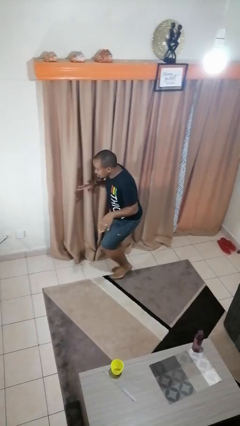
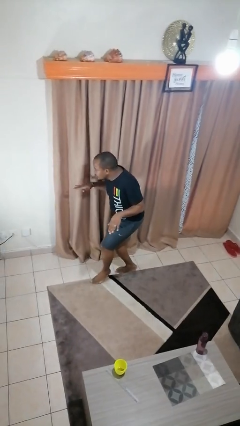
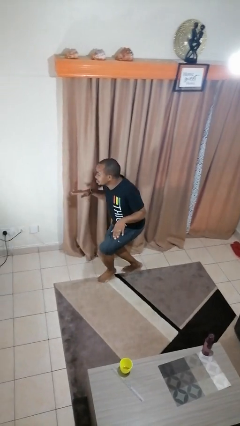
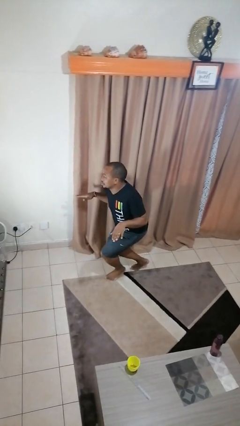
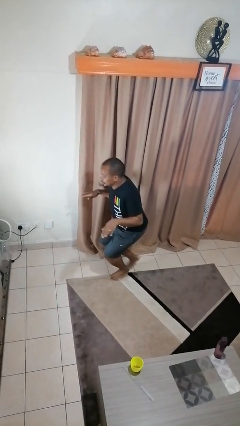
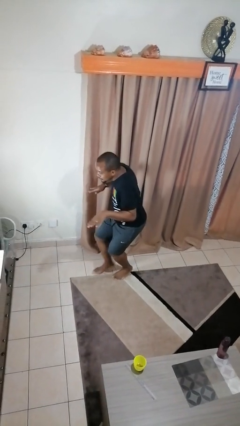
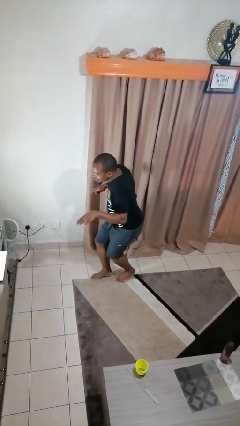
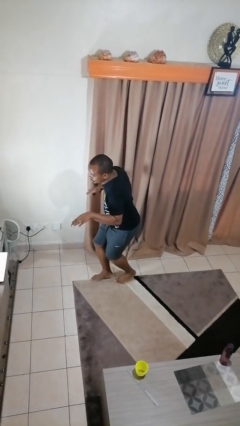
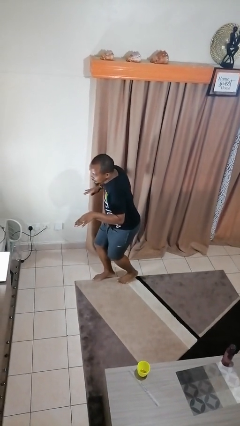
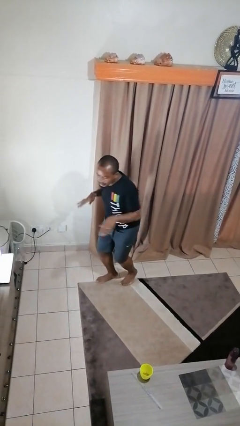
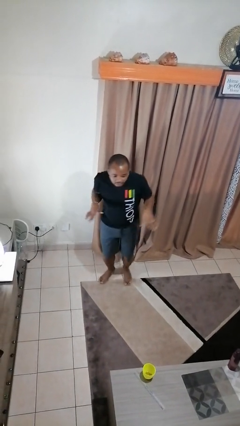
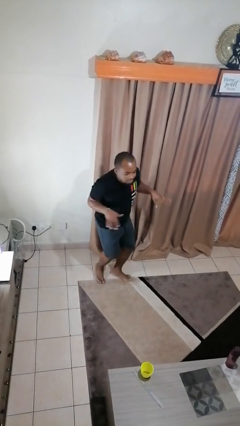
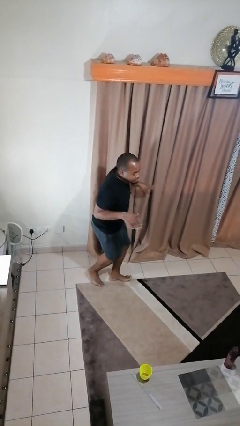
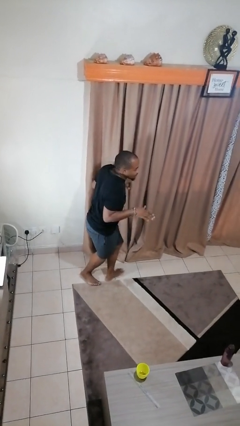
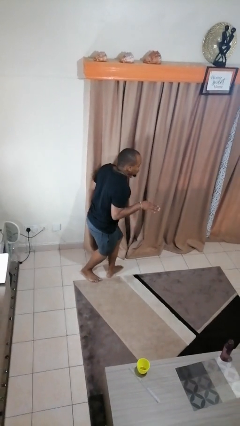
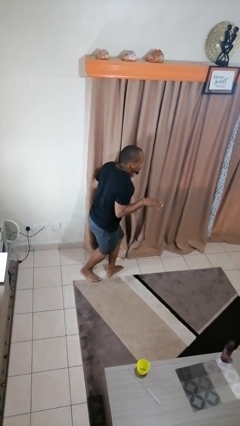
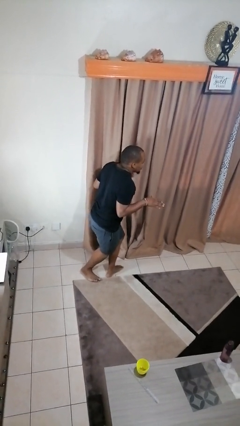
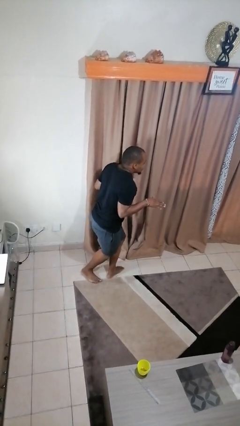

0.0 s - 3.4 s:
person throws object into air

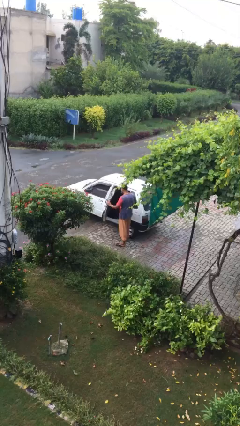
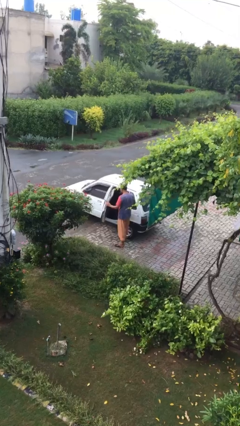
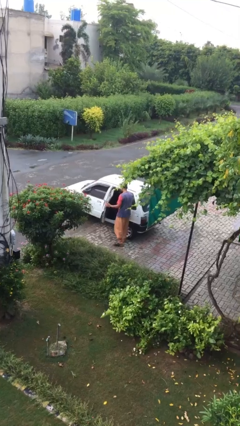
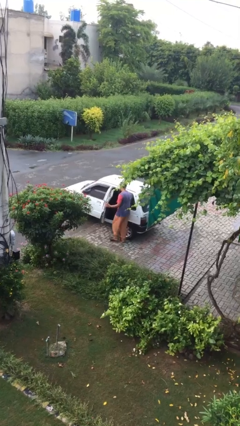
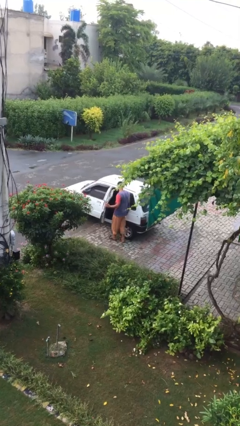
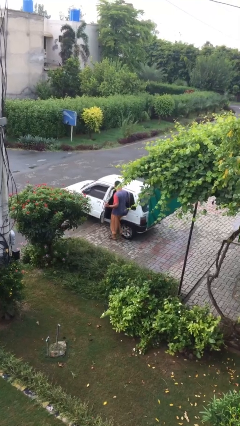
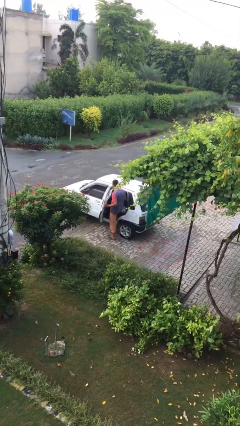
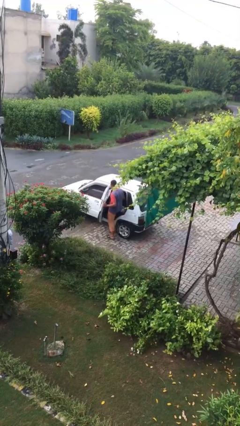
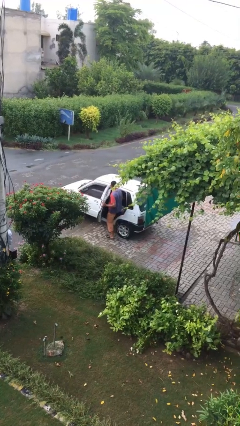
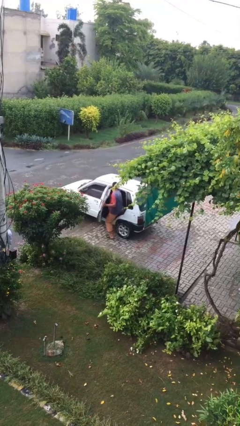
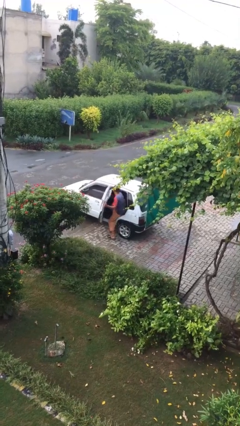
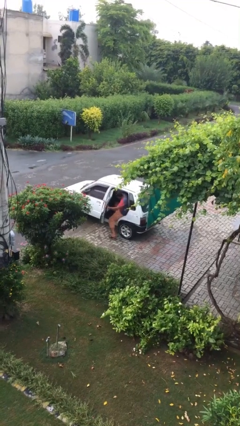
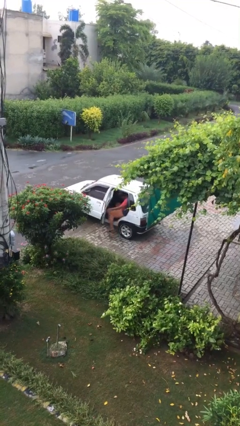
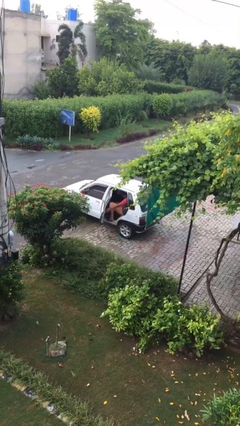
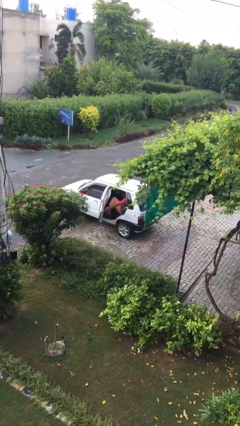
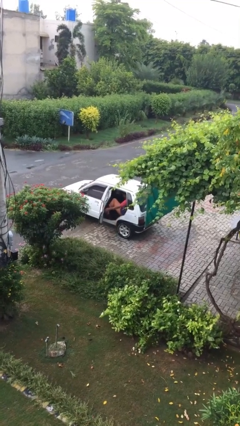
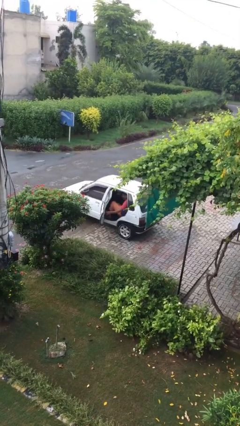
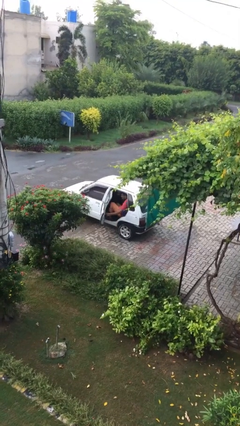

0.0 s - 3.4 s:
person enters car

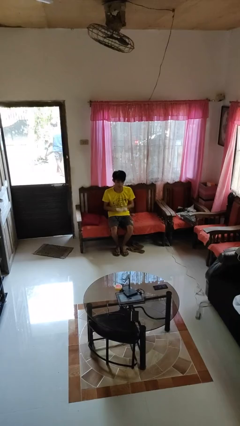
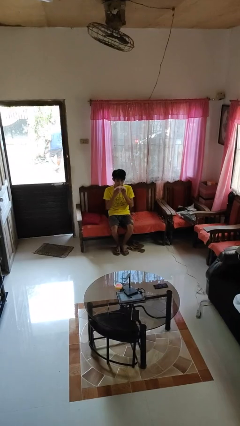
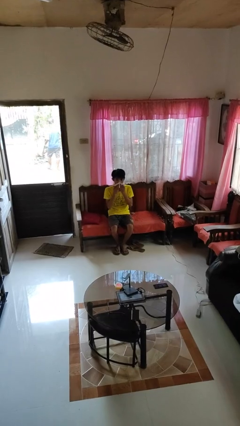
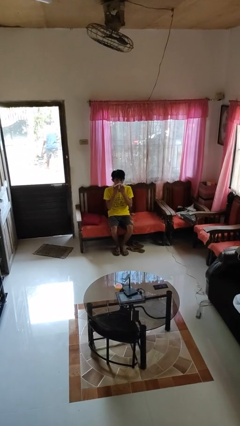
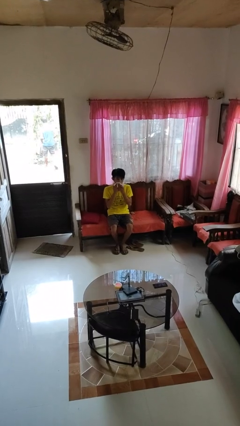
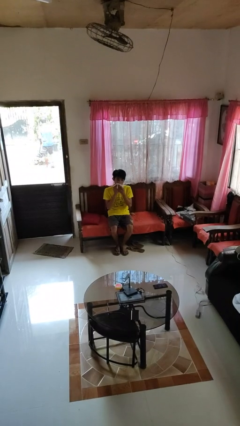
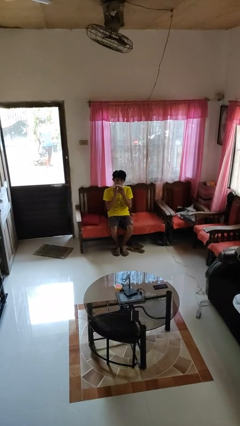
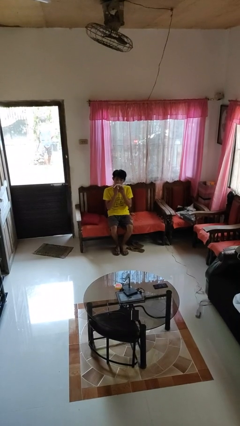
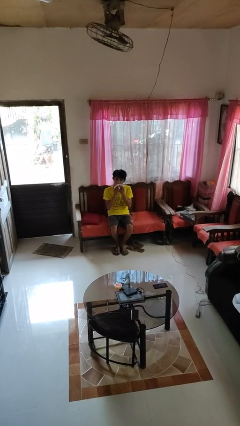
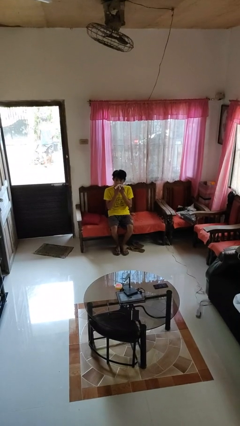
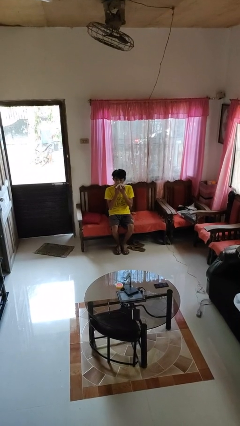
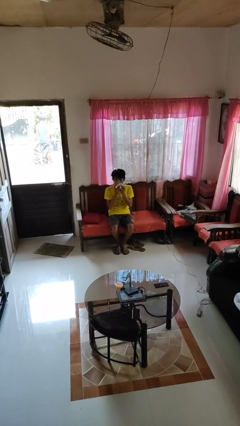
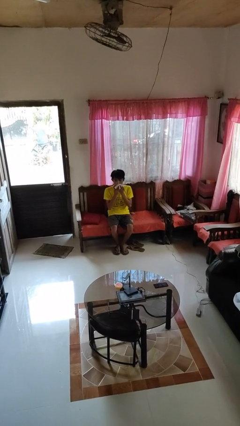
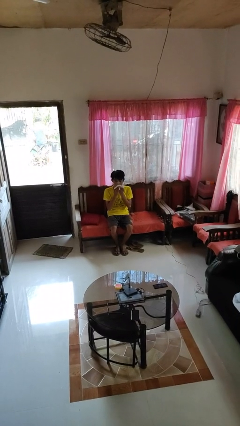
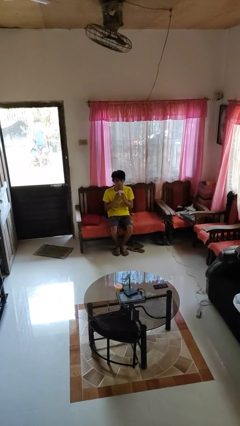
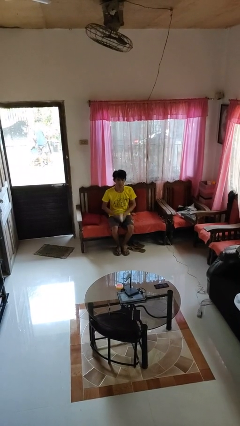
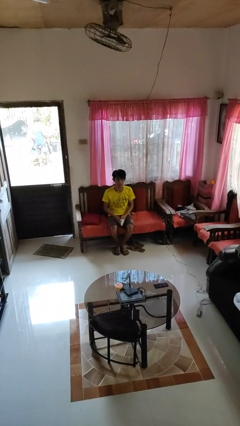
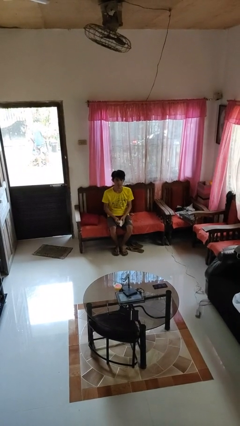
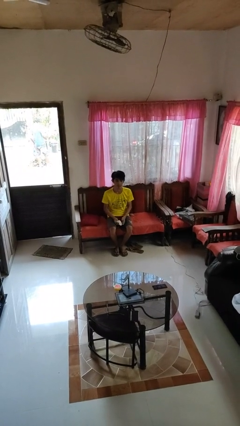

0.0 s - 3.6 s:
person wipes mouth with napkin

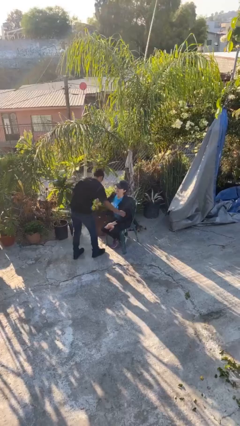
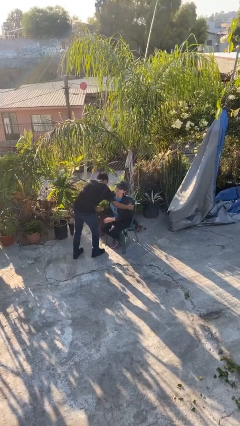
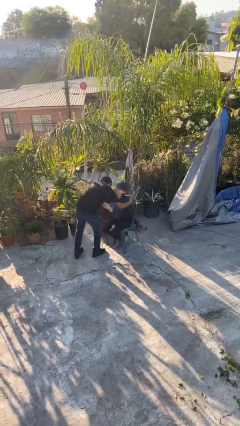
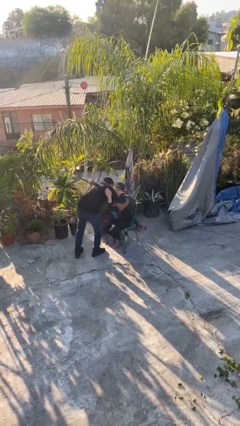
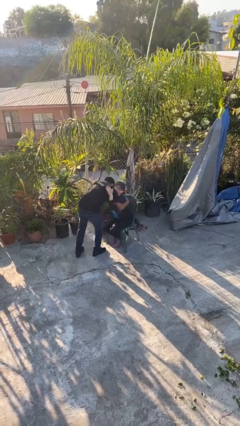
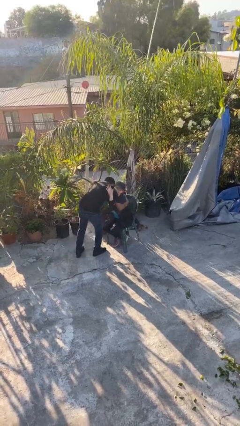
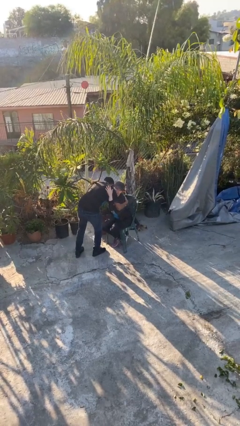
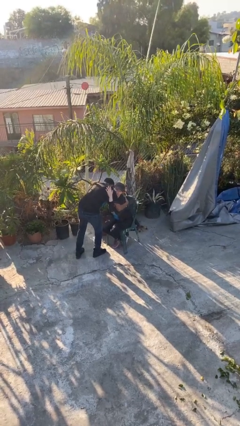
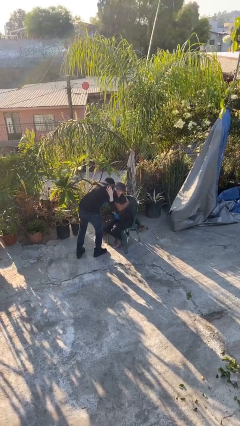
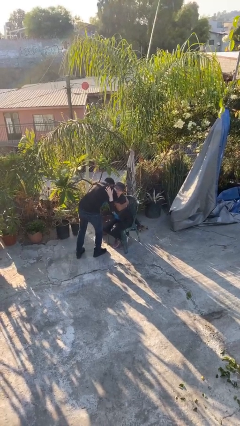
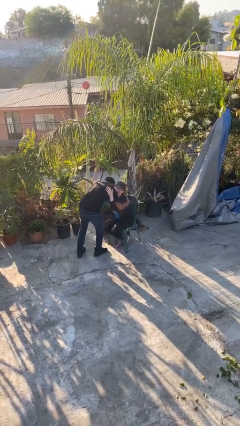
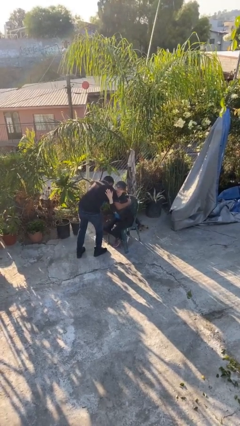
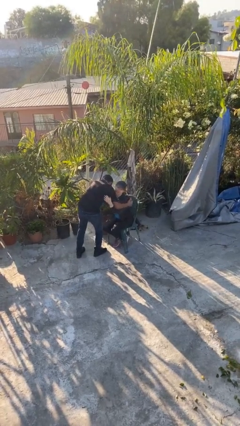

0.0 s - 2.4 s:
person embraces person

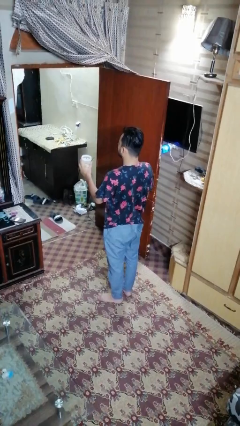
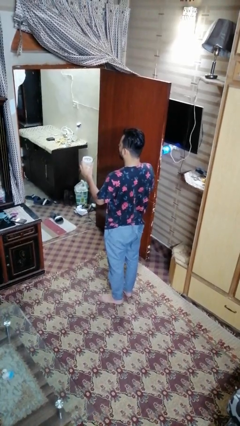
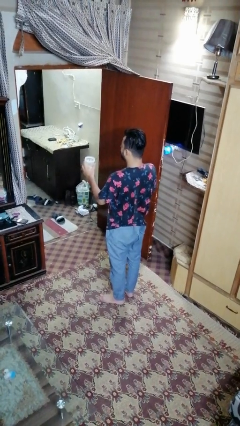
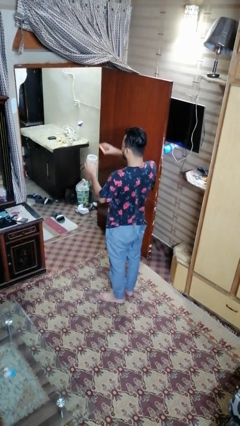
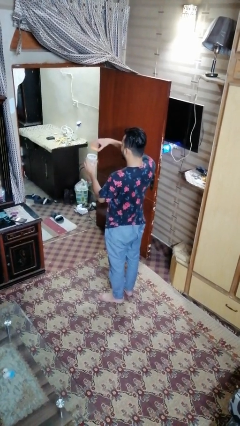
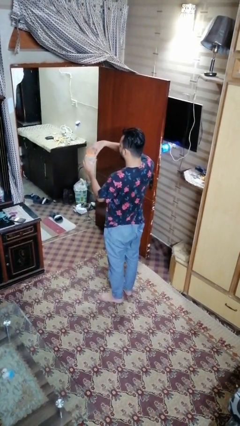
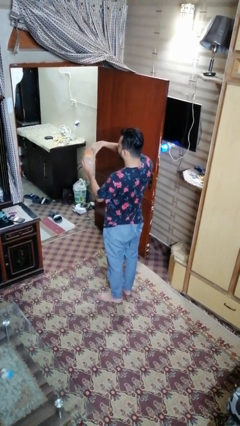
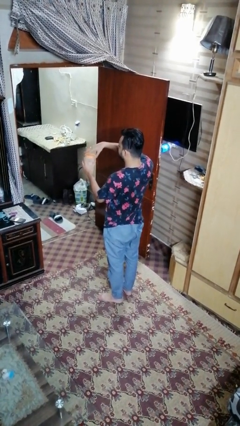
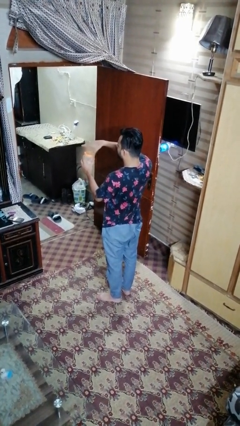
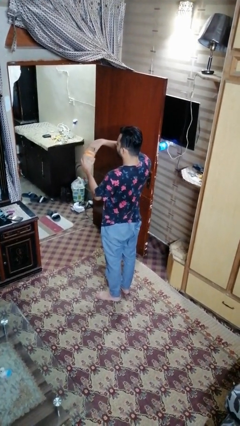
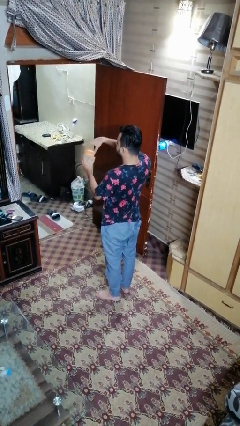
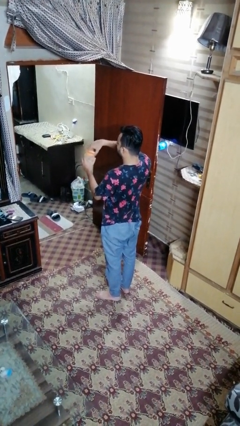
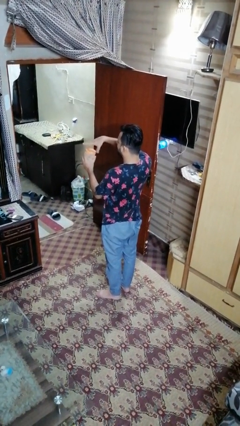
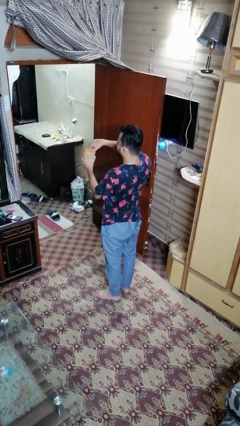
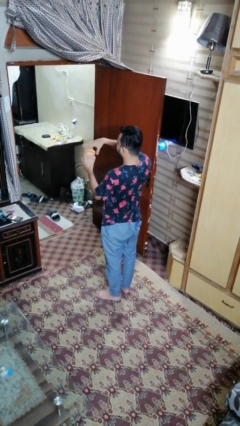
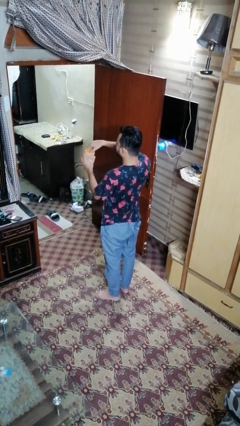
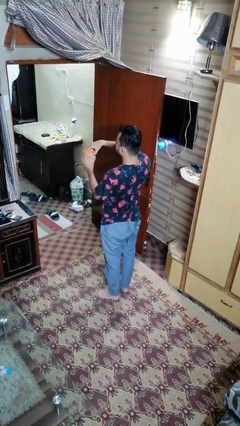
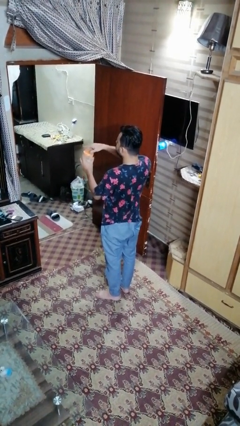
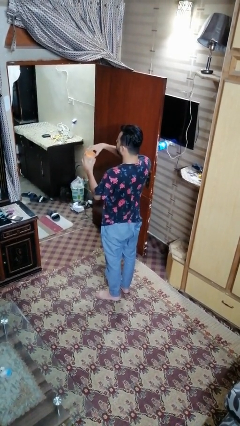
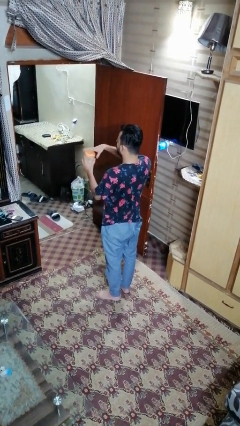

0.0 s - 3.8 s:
person closes jar

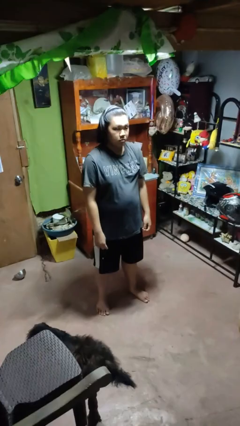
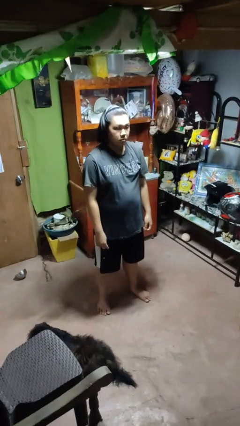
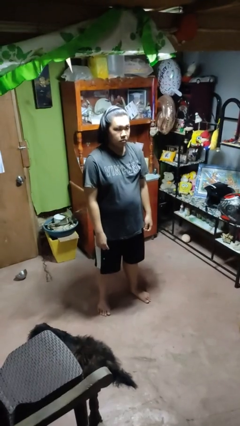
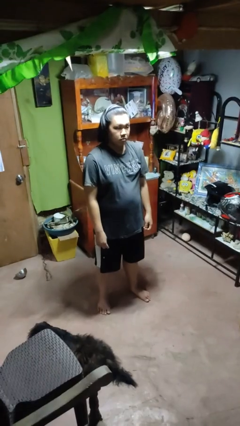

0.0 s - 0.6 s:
person takes off wristwatch
